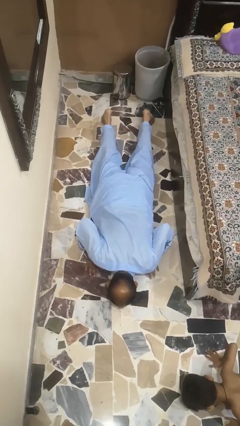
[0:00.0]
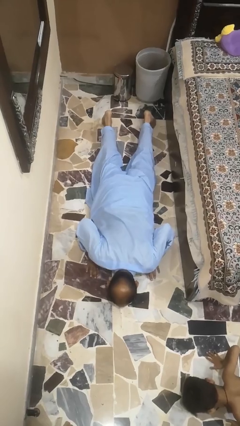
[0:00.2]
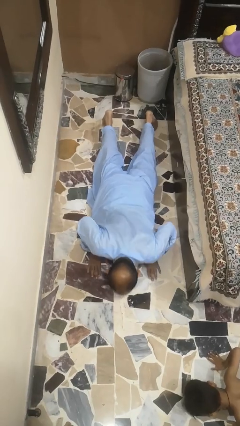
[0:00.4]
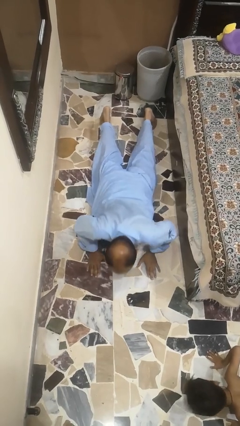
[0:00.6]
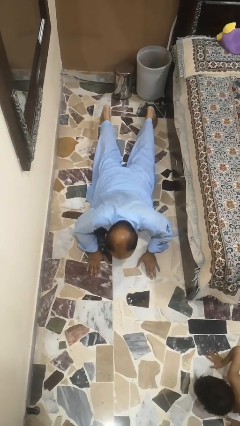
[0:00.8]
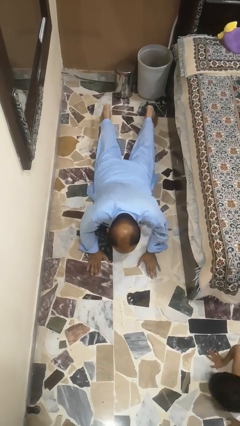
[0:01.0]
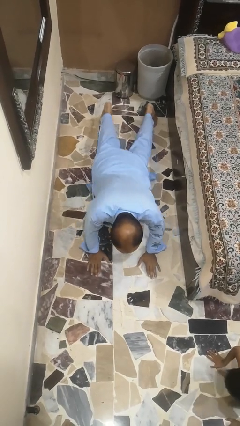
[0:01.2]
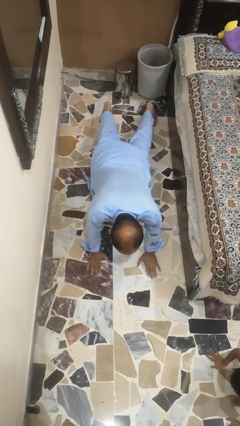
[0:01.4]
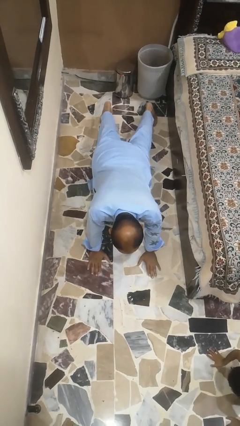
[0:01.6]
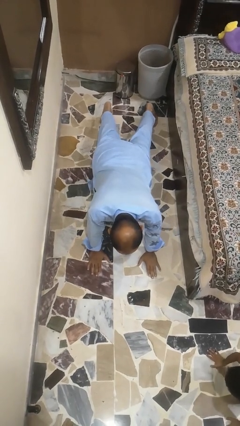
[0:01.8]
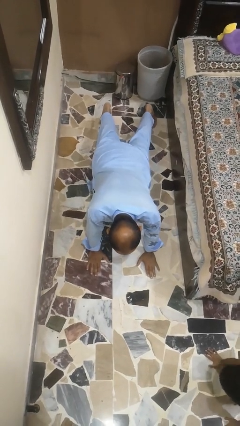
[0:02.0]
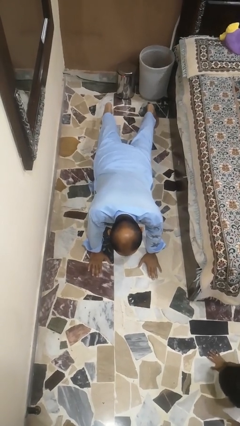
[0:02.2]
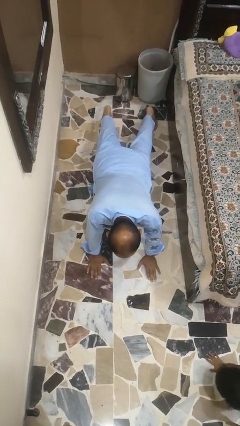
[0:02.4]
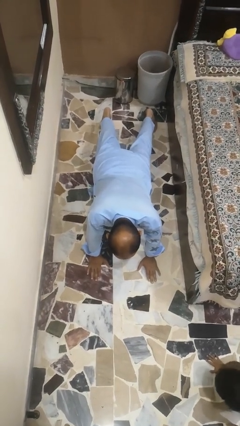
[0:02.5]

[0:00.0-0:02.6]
person exercises with pushup

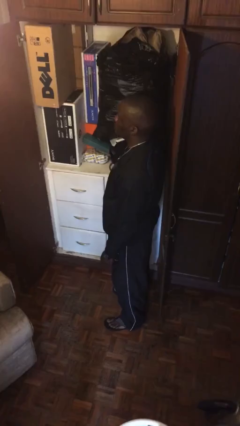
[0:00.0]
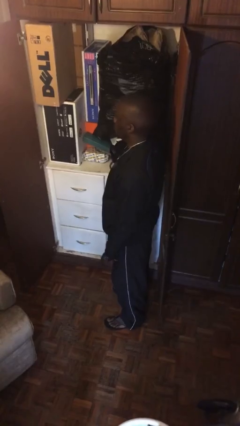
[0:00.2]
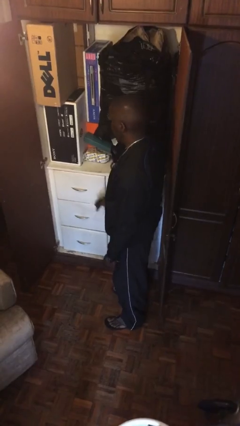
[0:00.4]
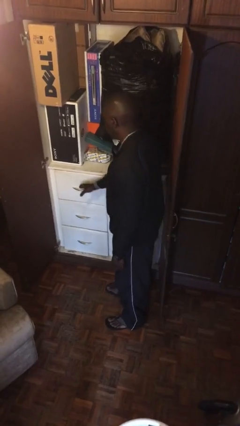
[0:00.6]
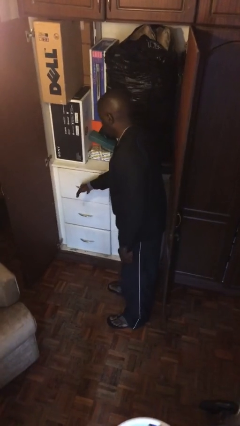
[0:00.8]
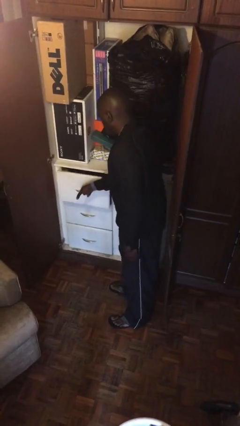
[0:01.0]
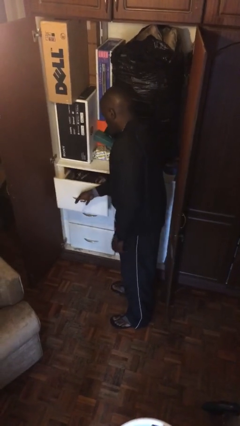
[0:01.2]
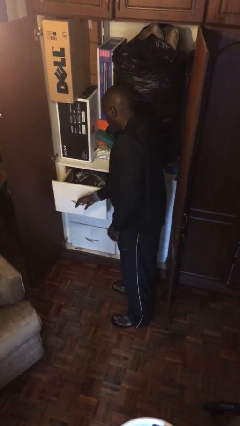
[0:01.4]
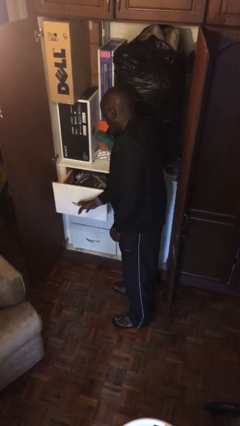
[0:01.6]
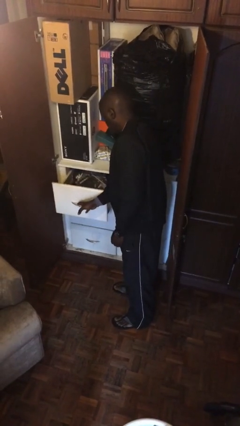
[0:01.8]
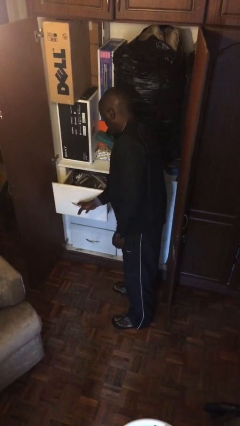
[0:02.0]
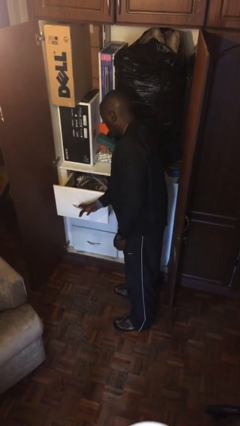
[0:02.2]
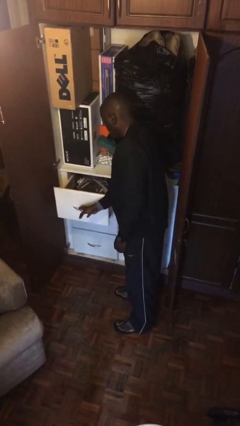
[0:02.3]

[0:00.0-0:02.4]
person opens dresser drawer

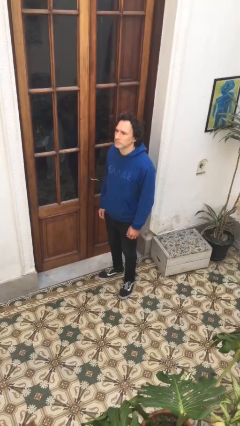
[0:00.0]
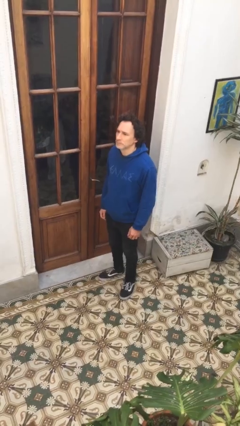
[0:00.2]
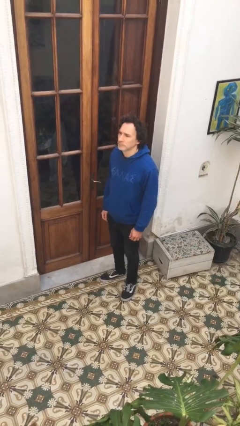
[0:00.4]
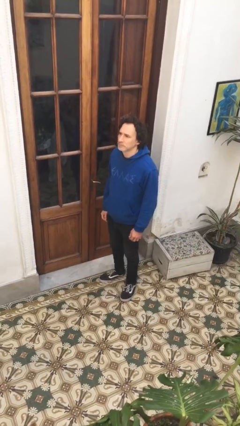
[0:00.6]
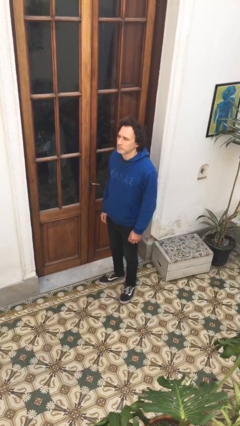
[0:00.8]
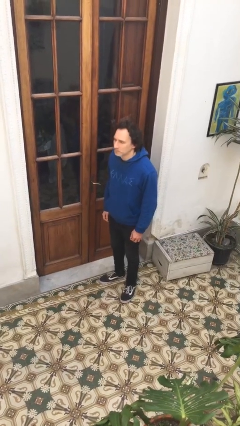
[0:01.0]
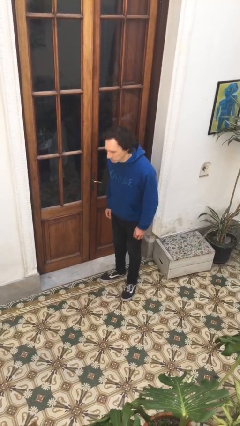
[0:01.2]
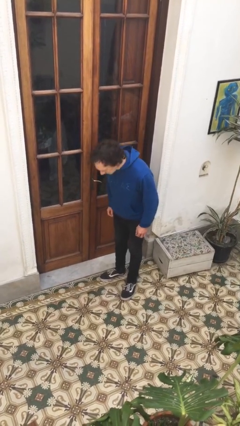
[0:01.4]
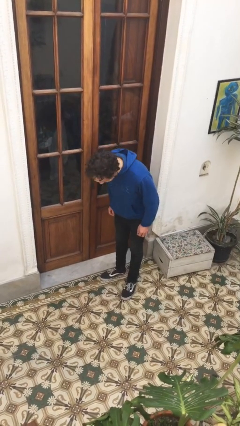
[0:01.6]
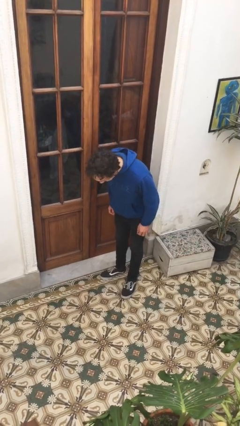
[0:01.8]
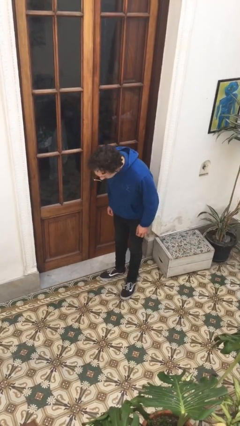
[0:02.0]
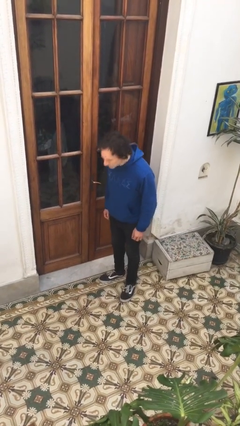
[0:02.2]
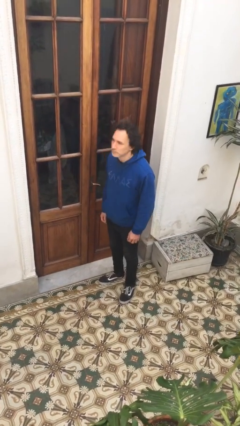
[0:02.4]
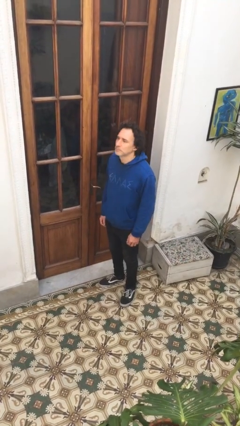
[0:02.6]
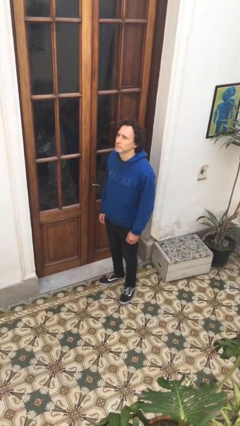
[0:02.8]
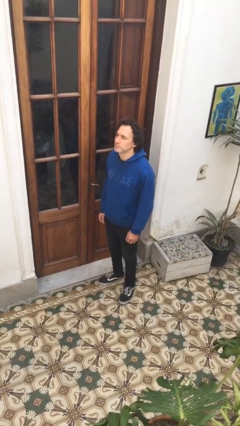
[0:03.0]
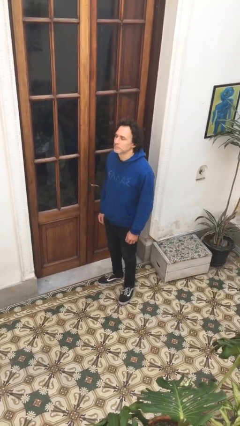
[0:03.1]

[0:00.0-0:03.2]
person bows

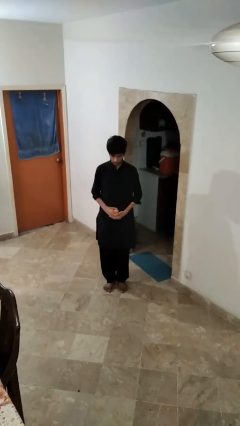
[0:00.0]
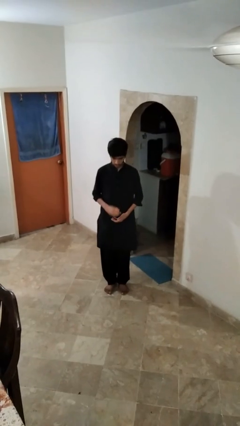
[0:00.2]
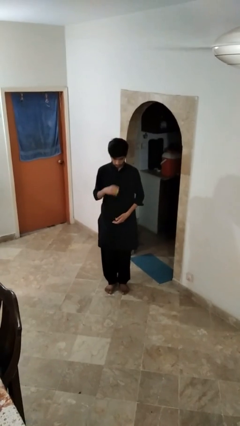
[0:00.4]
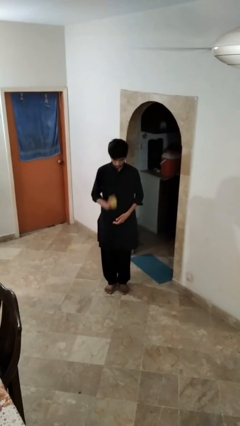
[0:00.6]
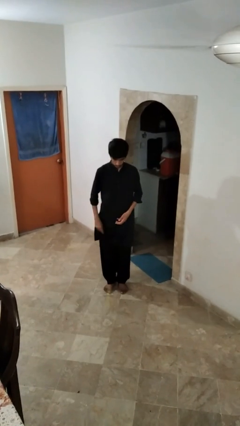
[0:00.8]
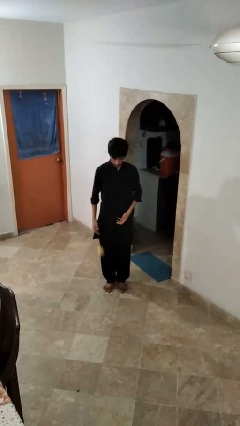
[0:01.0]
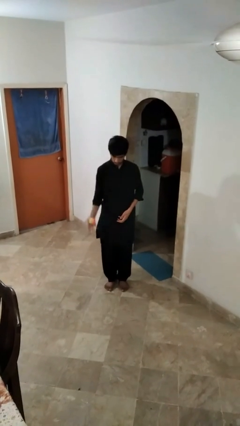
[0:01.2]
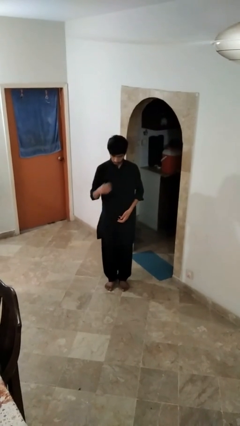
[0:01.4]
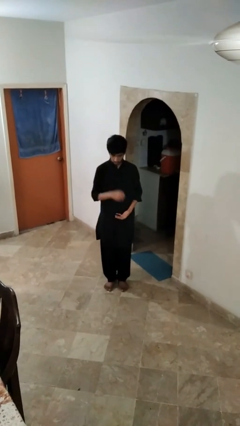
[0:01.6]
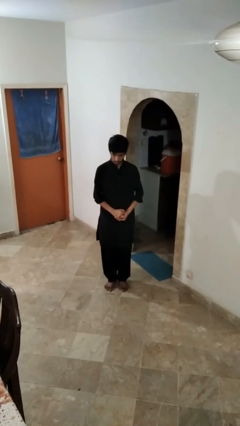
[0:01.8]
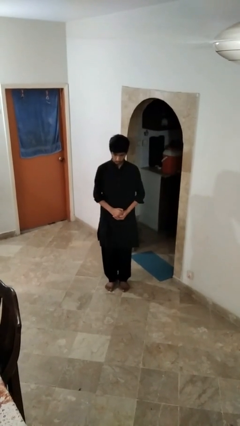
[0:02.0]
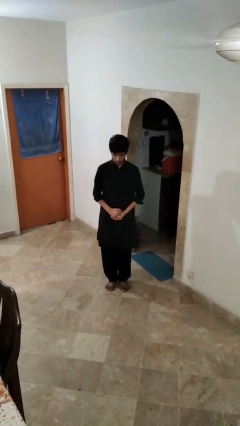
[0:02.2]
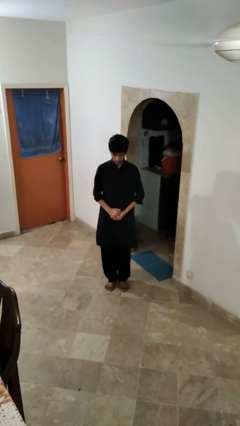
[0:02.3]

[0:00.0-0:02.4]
person bounces ball on floor

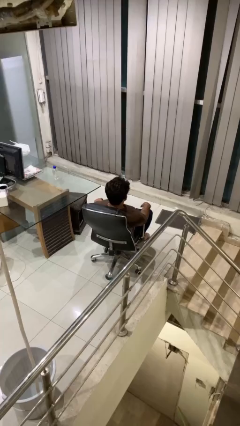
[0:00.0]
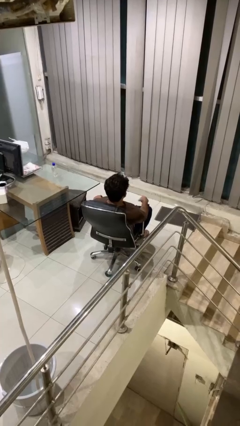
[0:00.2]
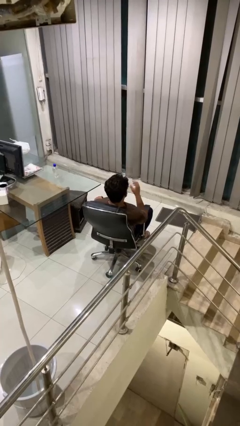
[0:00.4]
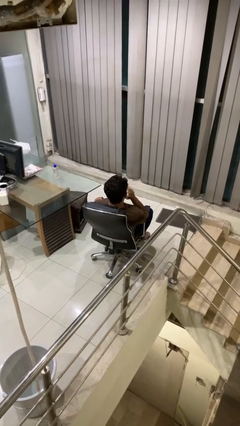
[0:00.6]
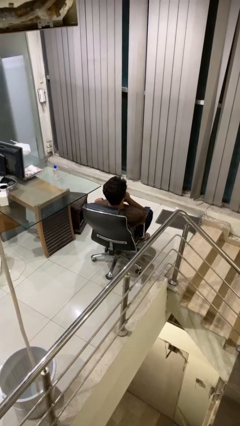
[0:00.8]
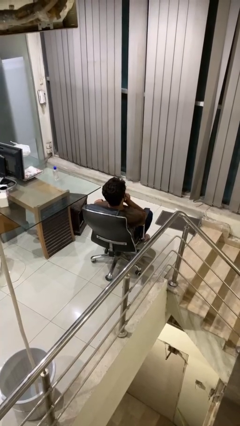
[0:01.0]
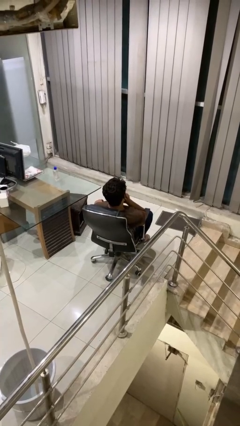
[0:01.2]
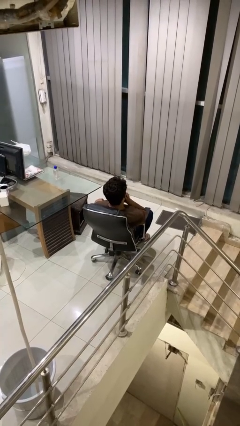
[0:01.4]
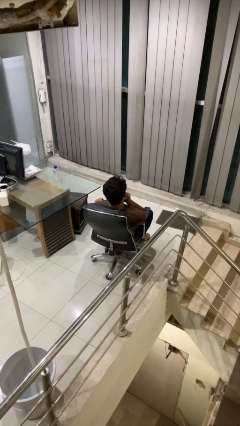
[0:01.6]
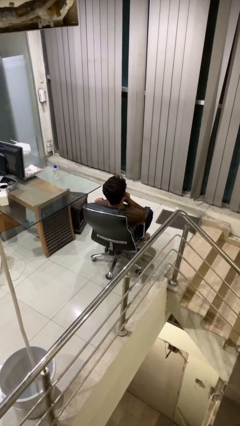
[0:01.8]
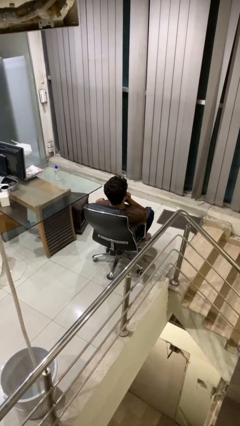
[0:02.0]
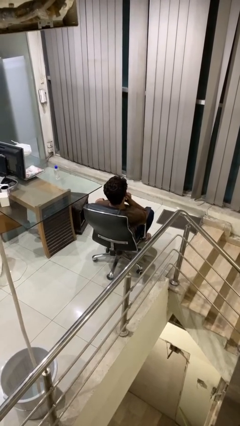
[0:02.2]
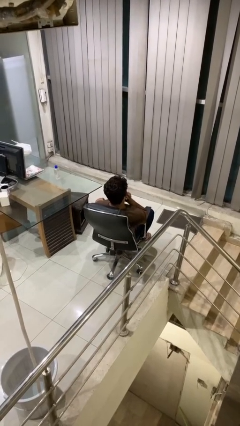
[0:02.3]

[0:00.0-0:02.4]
person strokes chin

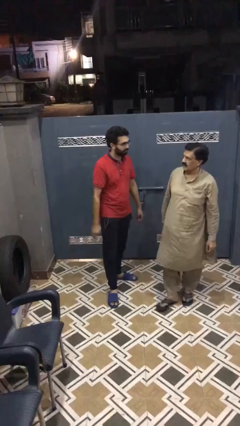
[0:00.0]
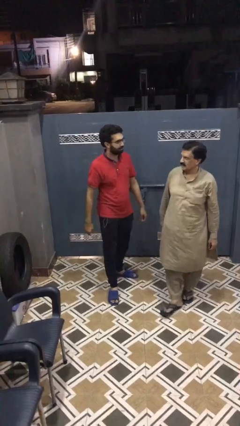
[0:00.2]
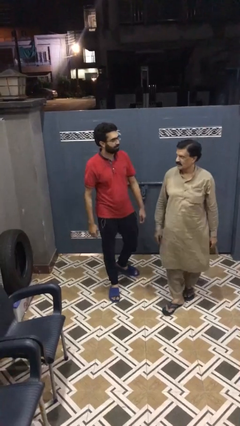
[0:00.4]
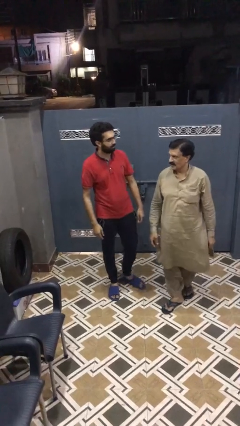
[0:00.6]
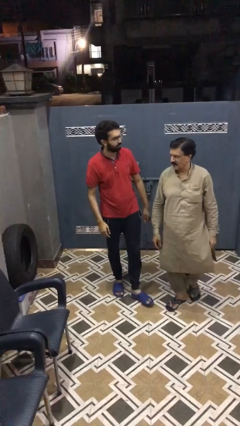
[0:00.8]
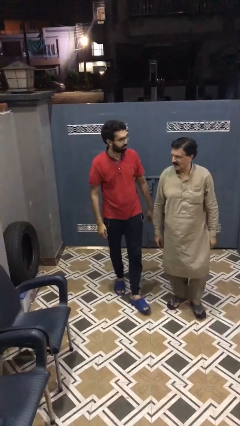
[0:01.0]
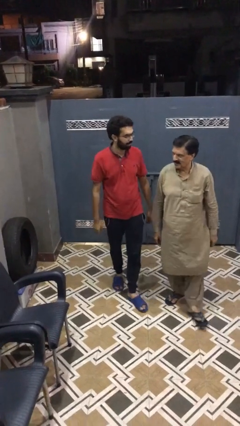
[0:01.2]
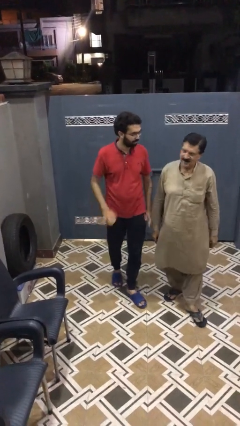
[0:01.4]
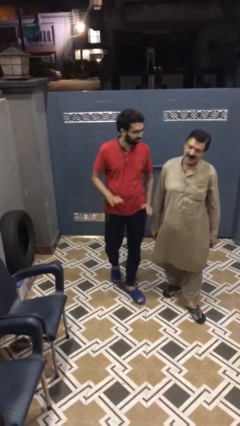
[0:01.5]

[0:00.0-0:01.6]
person talks to person

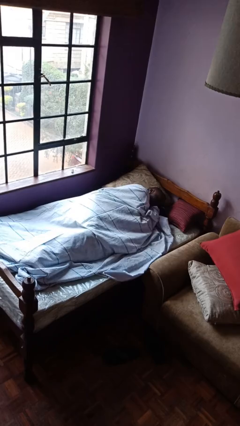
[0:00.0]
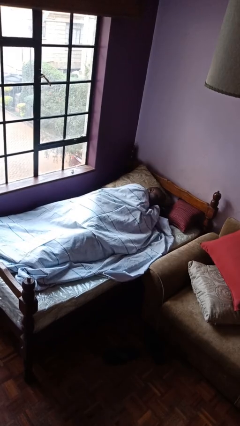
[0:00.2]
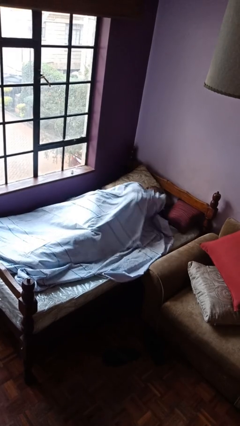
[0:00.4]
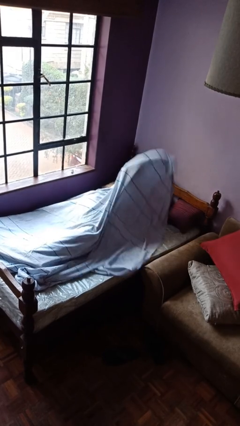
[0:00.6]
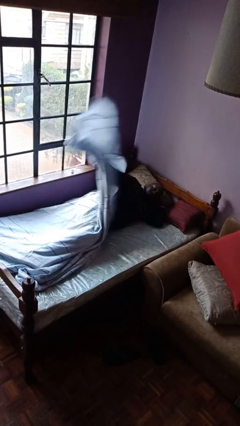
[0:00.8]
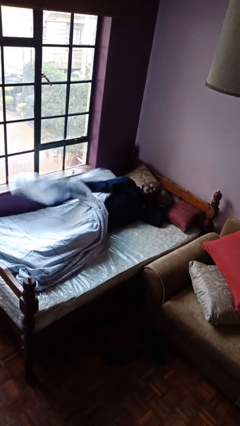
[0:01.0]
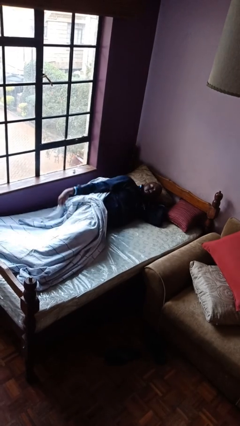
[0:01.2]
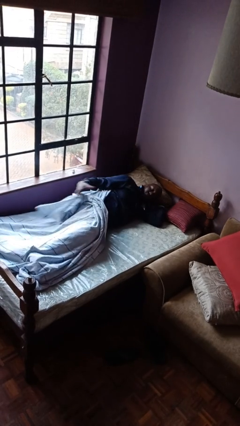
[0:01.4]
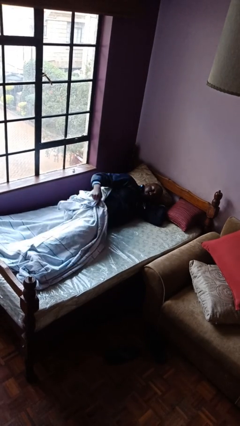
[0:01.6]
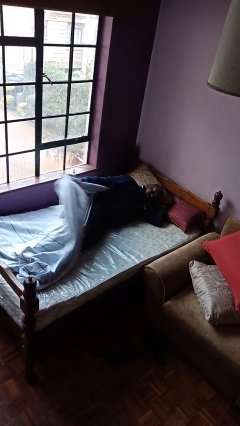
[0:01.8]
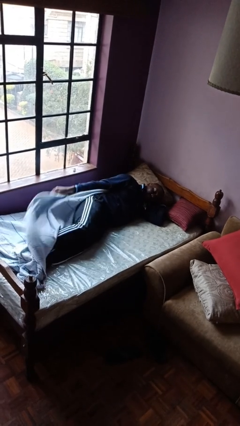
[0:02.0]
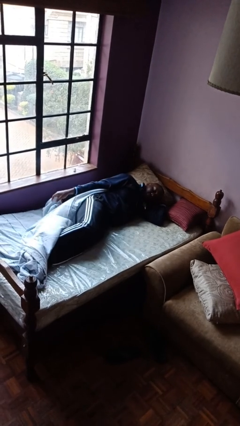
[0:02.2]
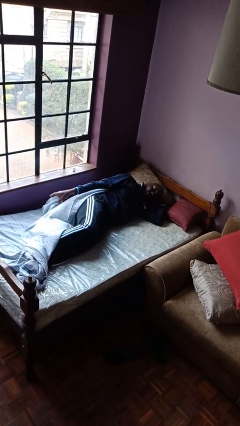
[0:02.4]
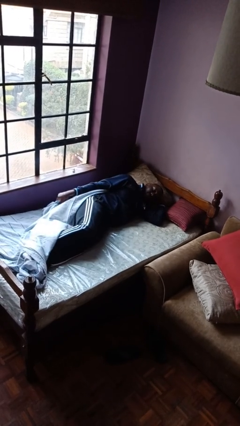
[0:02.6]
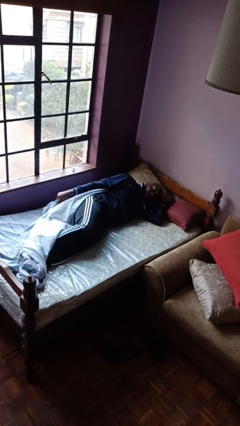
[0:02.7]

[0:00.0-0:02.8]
person uncovers with bedsheets
